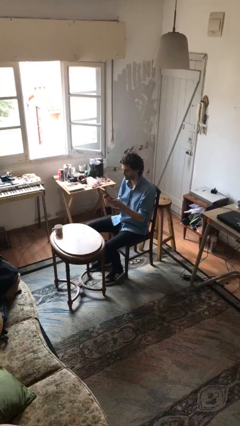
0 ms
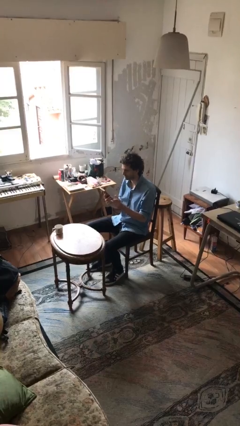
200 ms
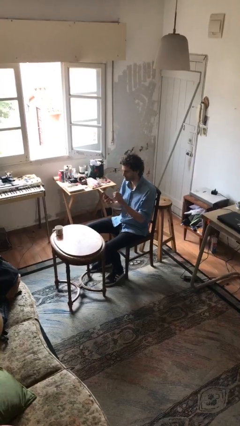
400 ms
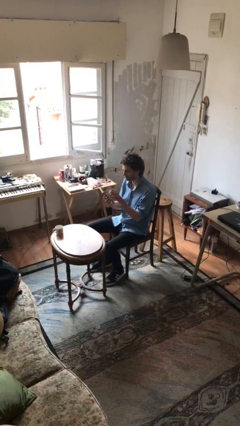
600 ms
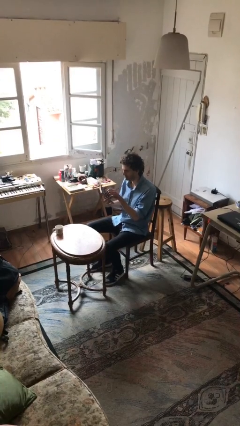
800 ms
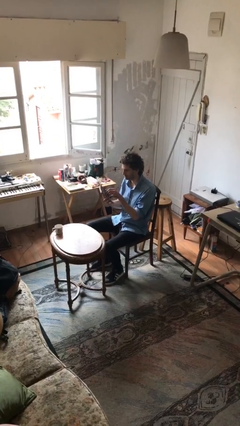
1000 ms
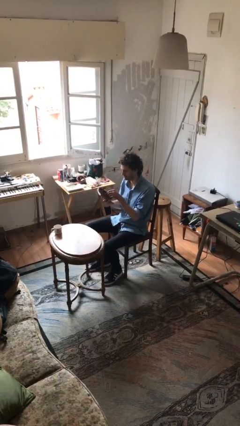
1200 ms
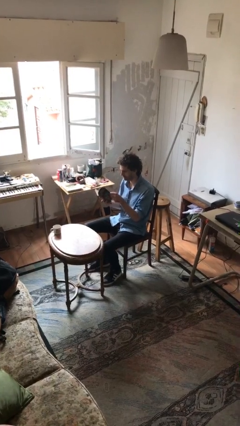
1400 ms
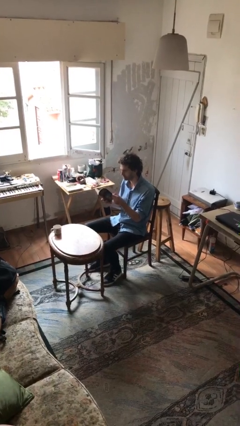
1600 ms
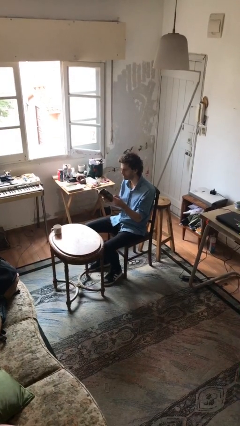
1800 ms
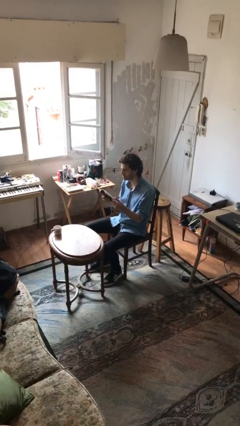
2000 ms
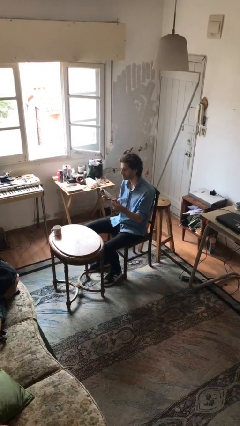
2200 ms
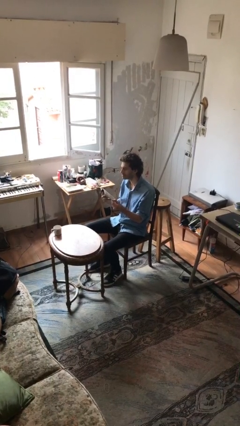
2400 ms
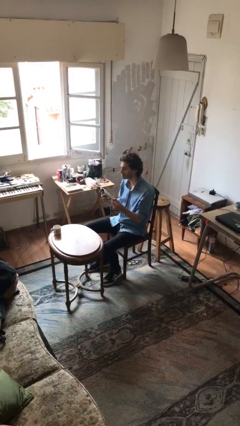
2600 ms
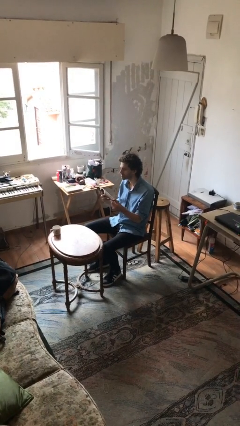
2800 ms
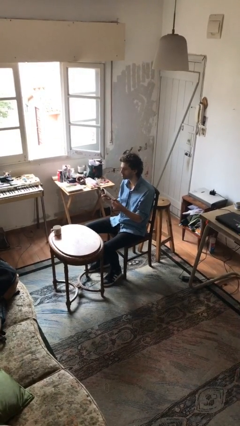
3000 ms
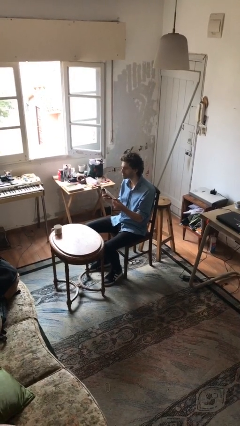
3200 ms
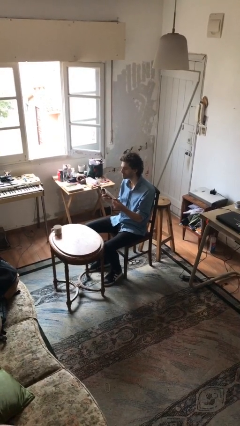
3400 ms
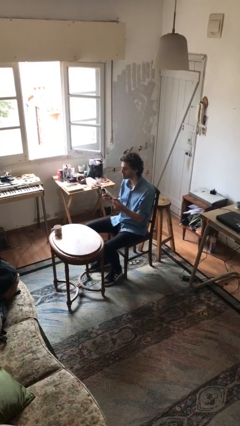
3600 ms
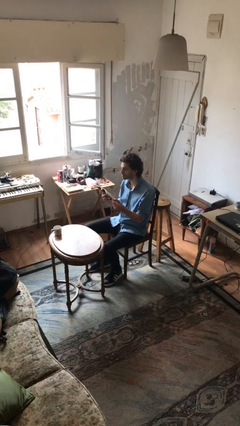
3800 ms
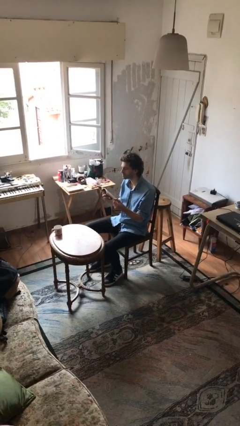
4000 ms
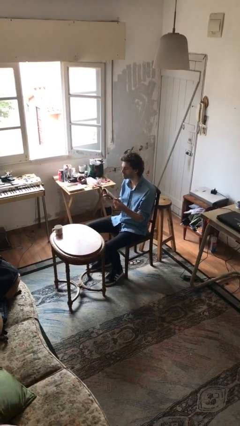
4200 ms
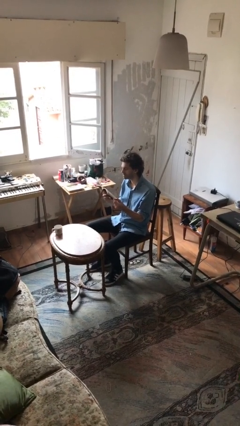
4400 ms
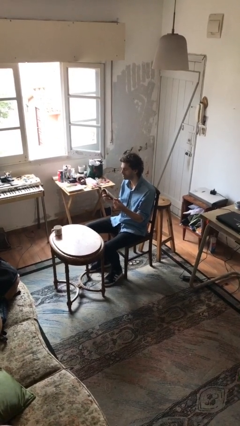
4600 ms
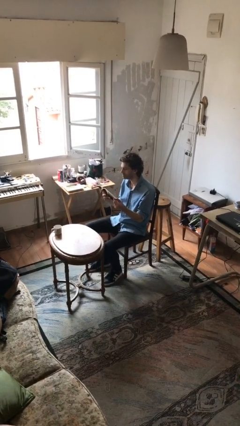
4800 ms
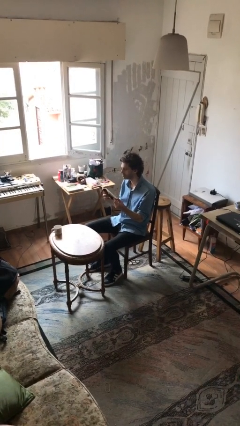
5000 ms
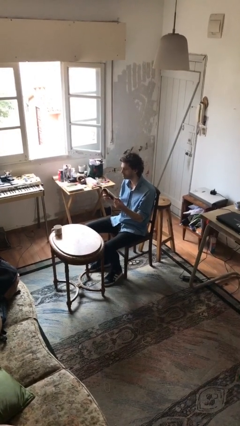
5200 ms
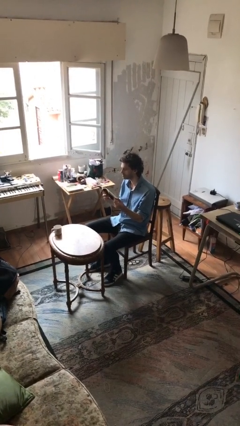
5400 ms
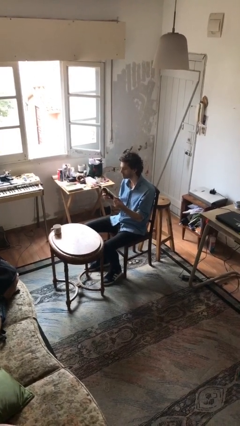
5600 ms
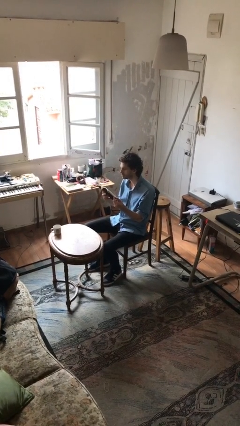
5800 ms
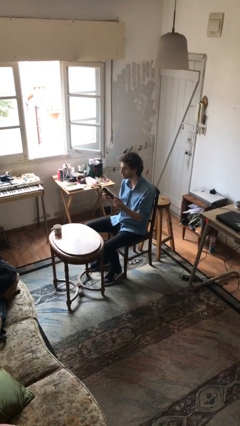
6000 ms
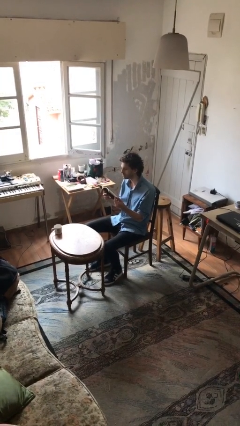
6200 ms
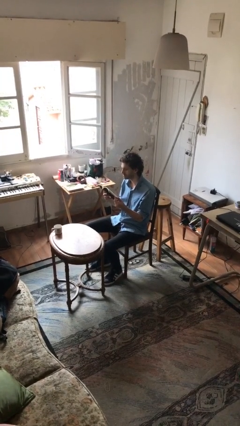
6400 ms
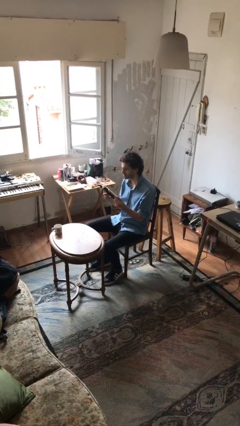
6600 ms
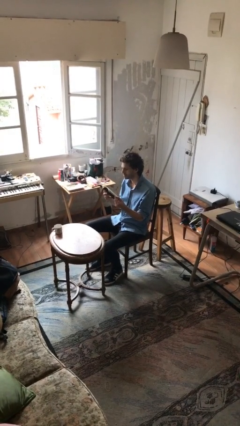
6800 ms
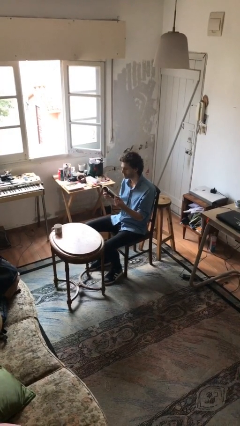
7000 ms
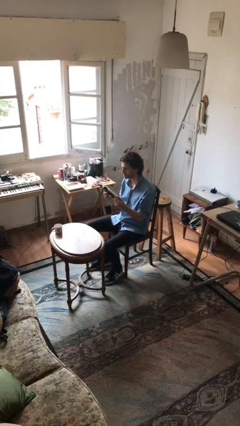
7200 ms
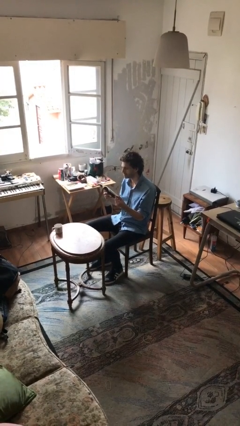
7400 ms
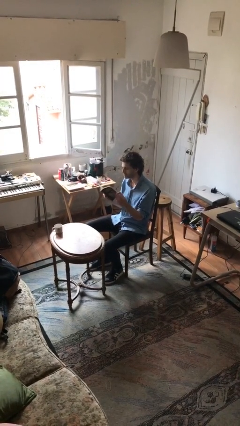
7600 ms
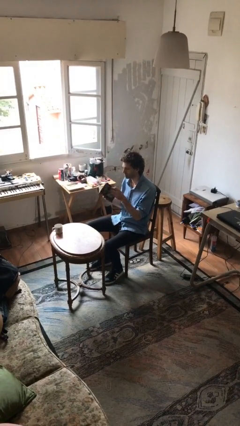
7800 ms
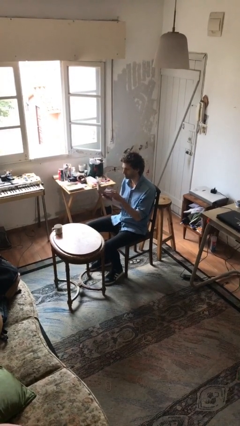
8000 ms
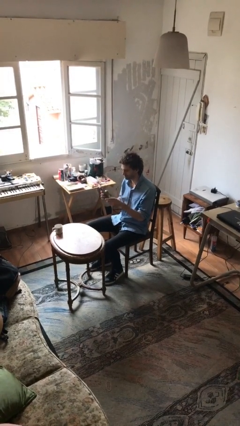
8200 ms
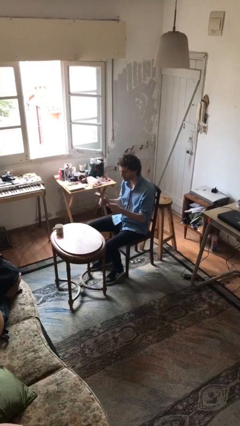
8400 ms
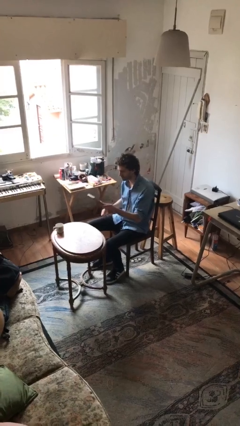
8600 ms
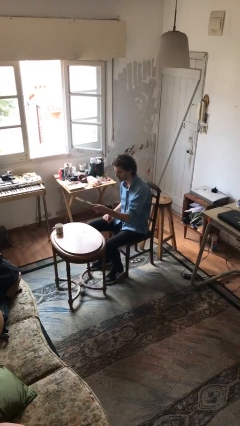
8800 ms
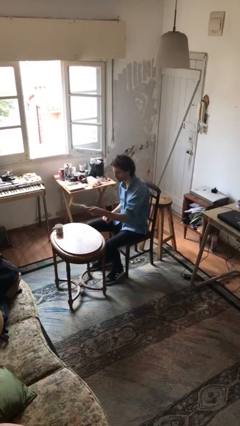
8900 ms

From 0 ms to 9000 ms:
person reads document

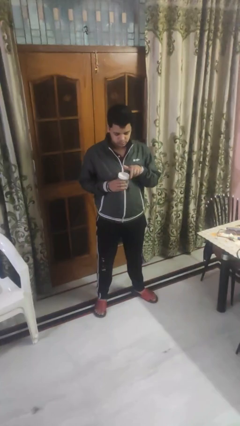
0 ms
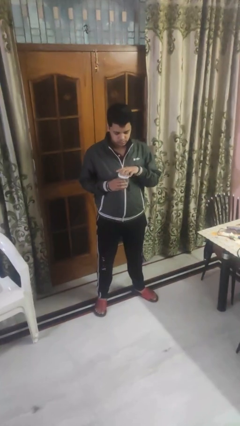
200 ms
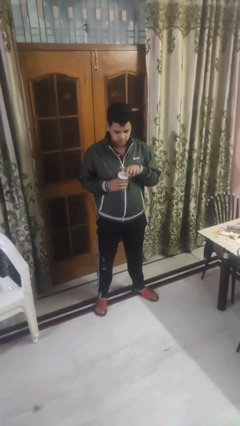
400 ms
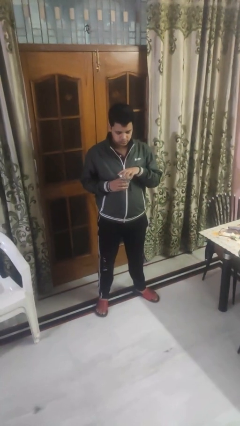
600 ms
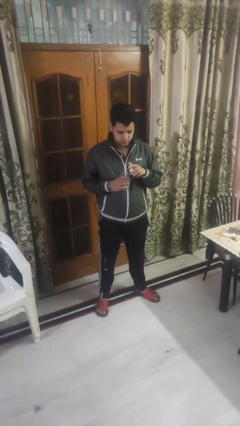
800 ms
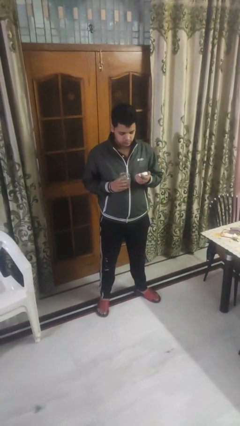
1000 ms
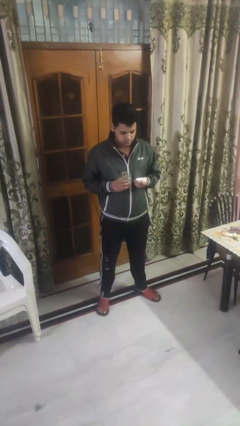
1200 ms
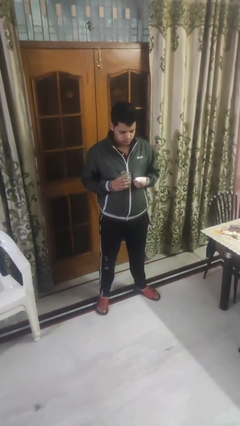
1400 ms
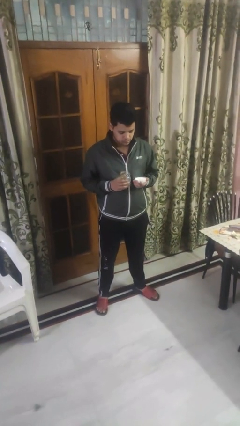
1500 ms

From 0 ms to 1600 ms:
person opens jar

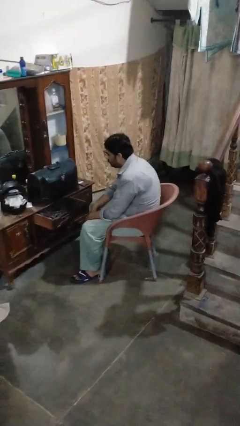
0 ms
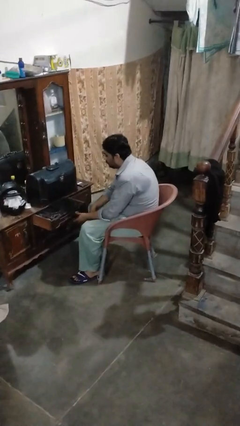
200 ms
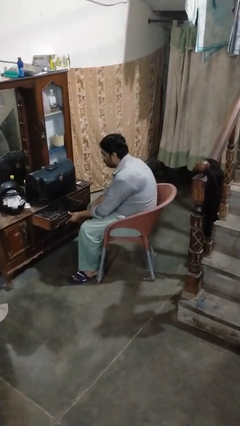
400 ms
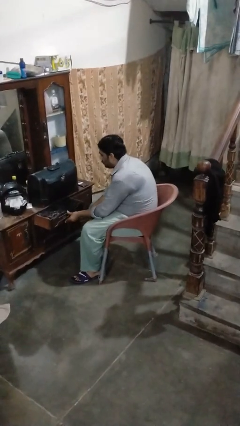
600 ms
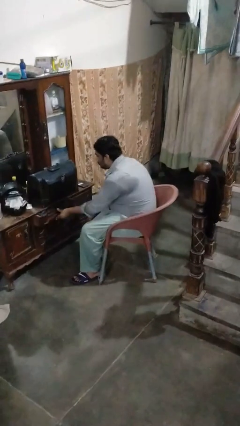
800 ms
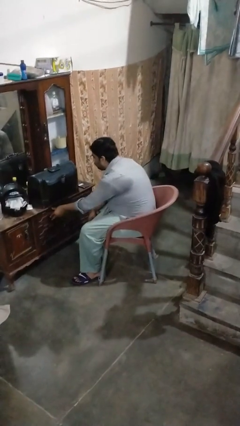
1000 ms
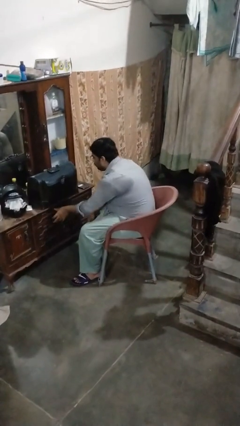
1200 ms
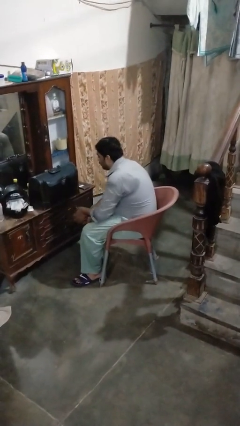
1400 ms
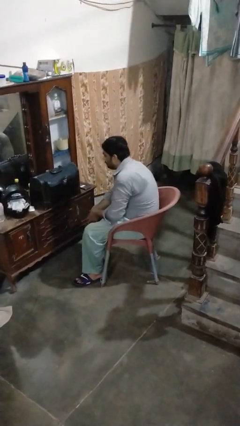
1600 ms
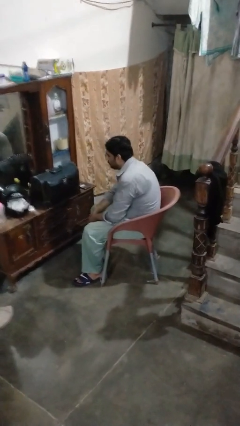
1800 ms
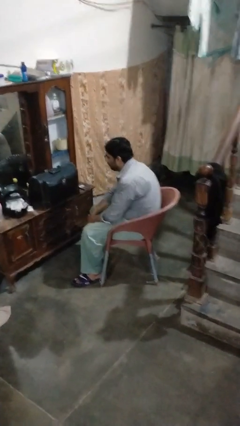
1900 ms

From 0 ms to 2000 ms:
person closes dresser drawer

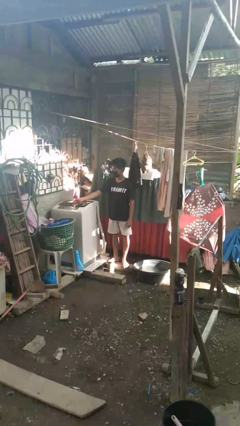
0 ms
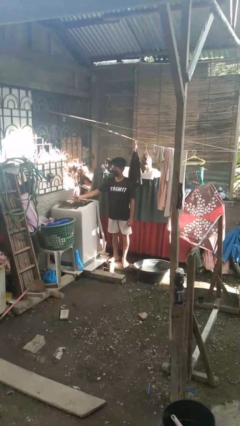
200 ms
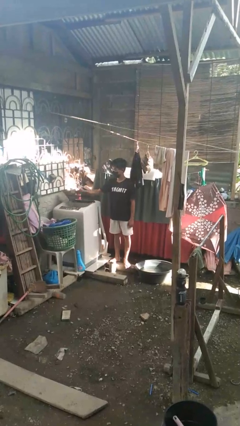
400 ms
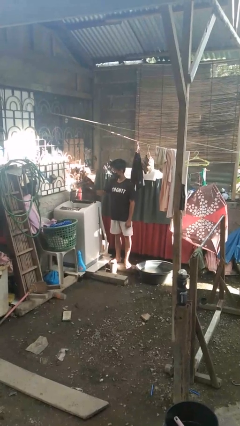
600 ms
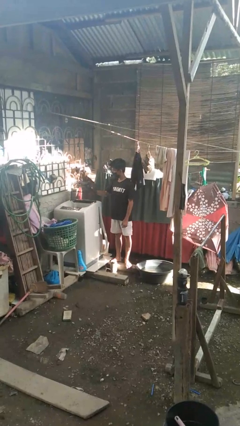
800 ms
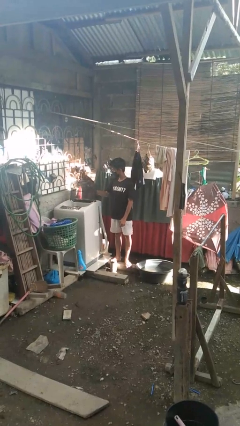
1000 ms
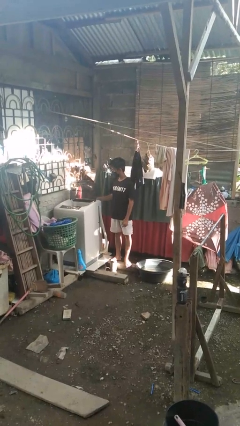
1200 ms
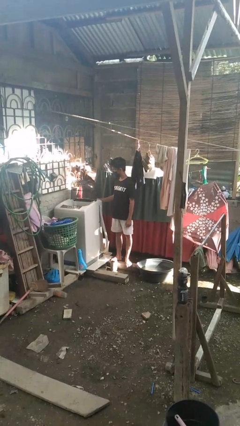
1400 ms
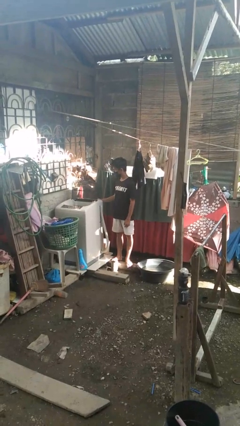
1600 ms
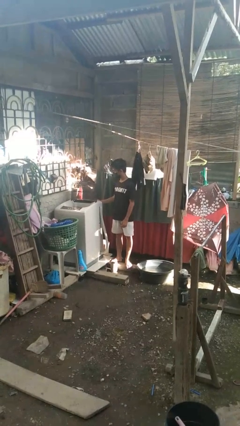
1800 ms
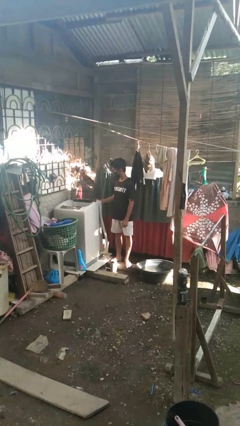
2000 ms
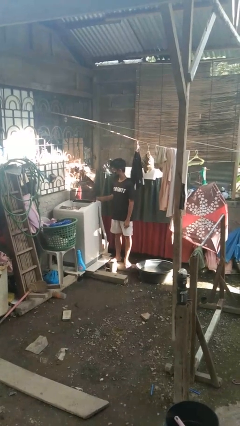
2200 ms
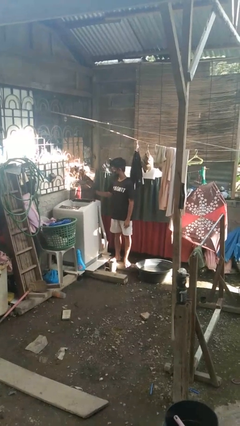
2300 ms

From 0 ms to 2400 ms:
person opens clothes washer

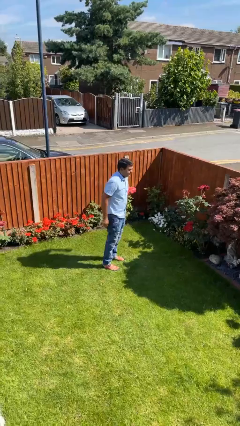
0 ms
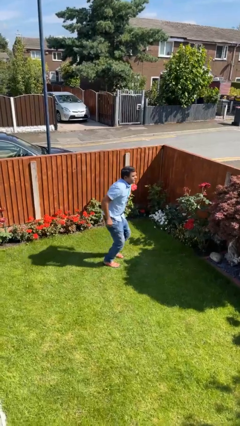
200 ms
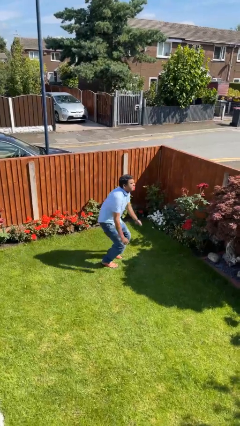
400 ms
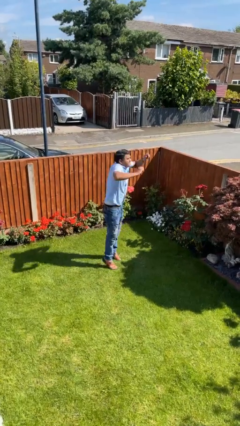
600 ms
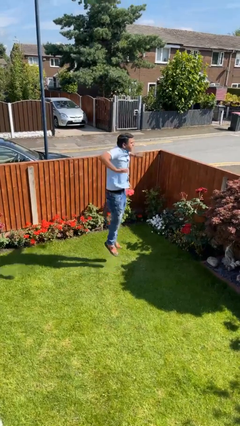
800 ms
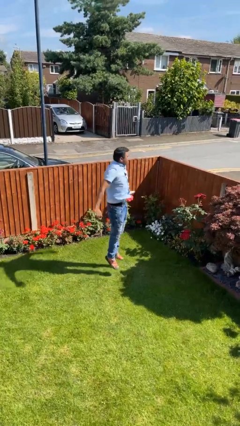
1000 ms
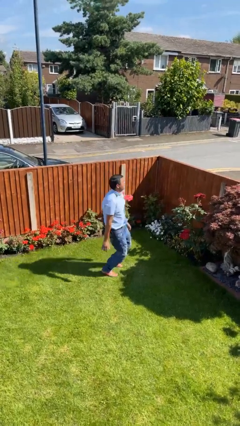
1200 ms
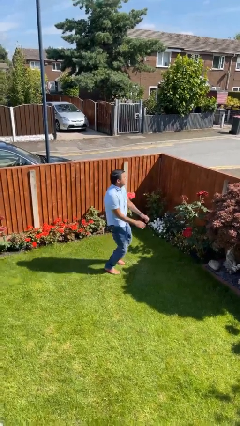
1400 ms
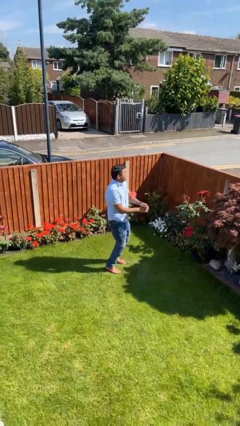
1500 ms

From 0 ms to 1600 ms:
person jumps

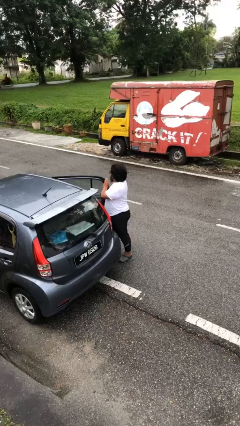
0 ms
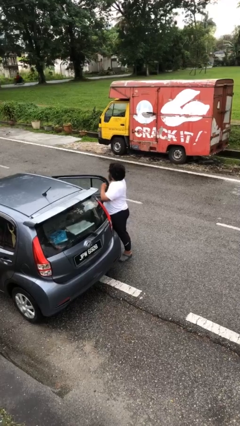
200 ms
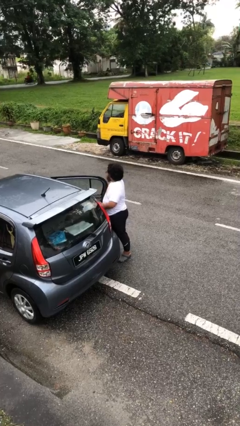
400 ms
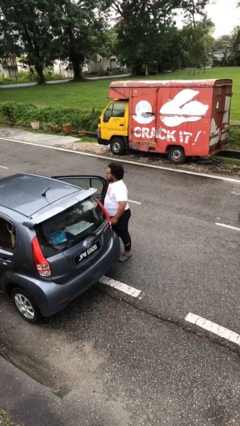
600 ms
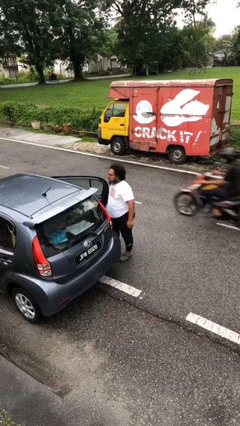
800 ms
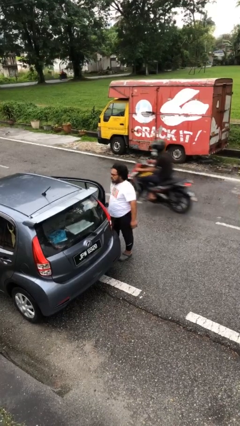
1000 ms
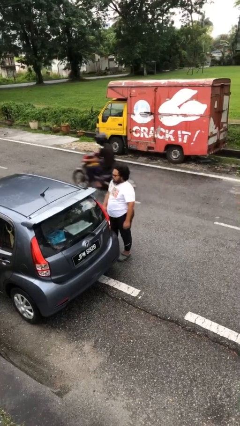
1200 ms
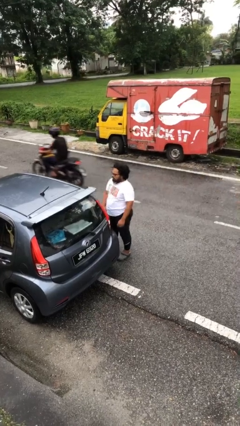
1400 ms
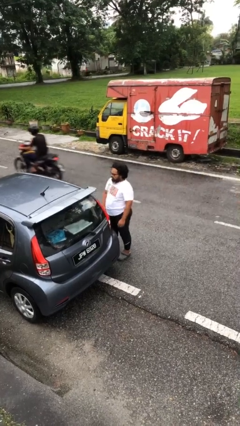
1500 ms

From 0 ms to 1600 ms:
person closes car door
